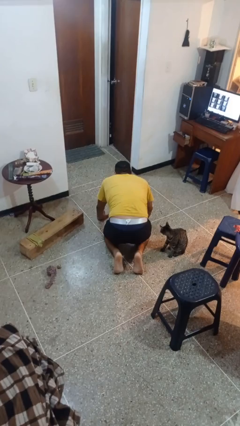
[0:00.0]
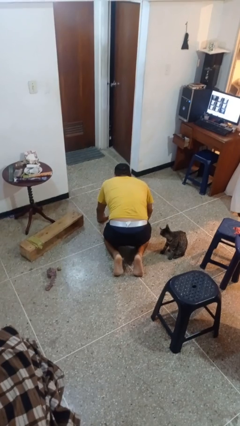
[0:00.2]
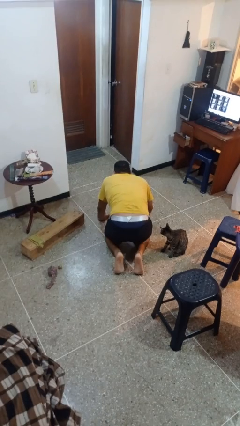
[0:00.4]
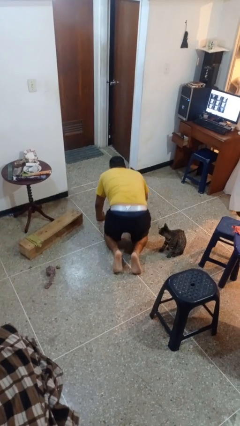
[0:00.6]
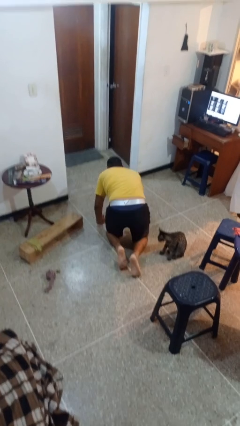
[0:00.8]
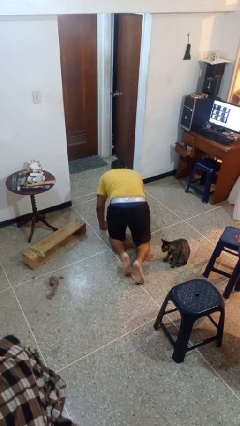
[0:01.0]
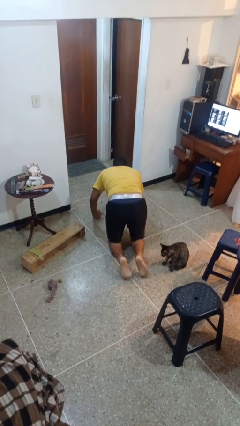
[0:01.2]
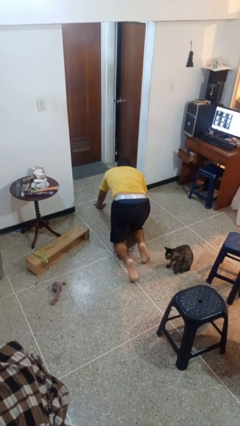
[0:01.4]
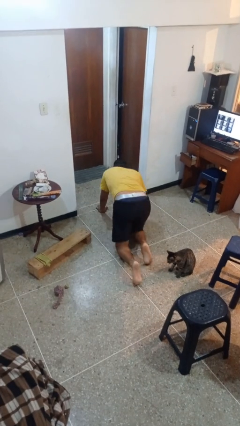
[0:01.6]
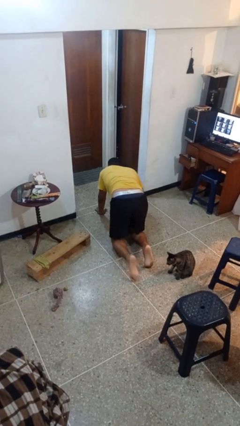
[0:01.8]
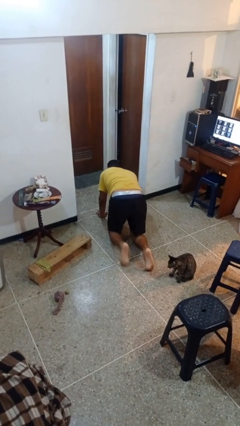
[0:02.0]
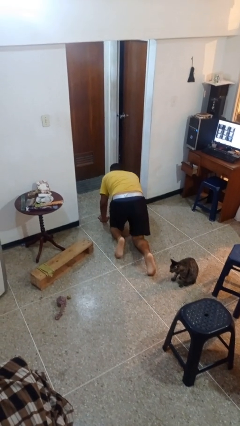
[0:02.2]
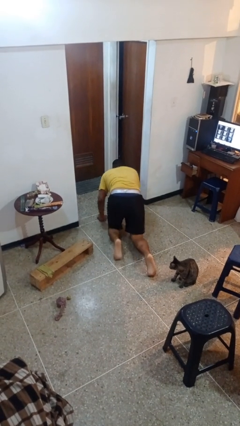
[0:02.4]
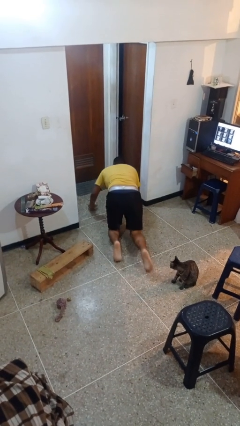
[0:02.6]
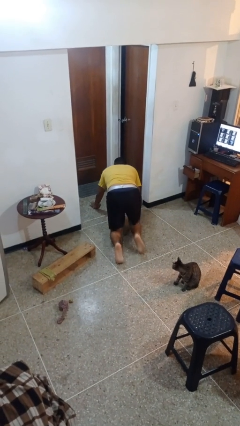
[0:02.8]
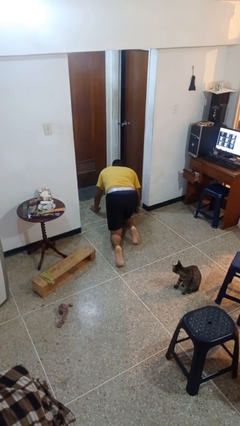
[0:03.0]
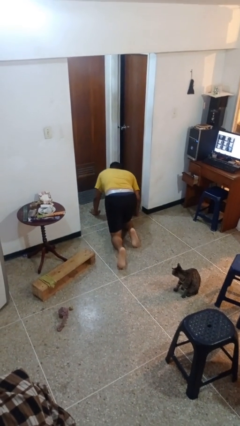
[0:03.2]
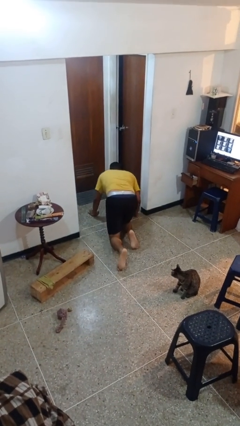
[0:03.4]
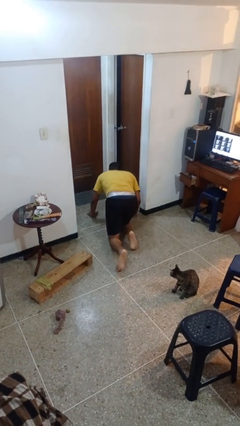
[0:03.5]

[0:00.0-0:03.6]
person crawls

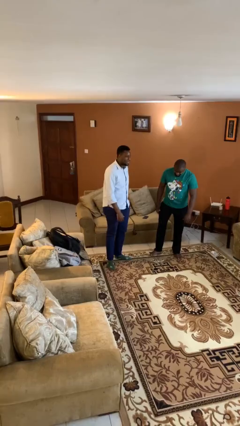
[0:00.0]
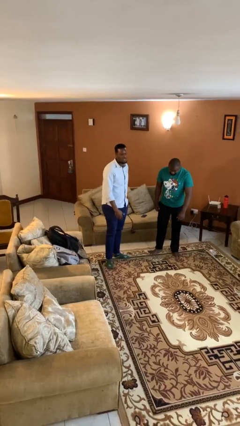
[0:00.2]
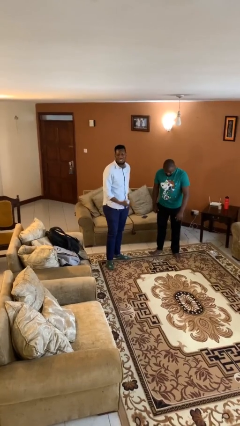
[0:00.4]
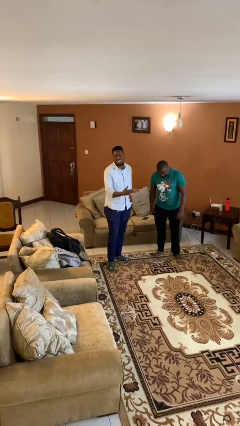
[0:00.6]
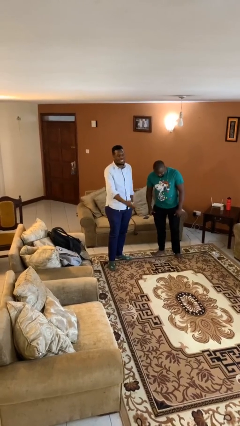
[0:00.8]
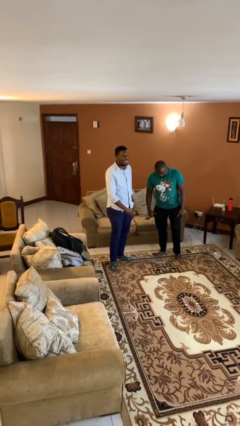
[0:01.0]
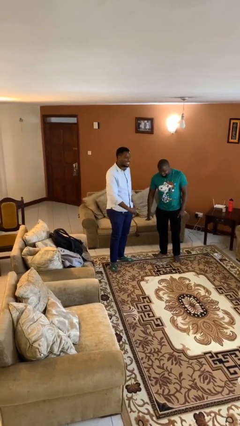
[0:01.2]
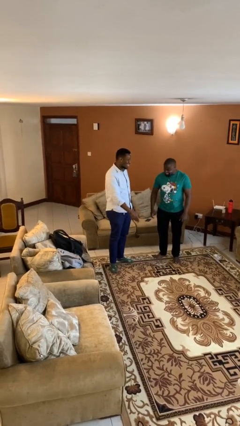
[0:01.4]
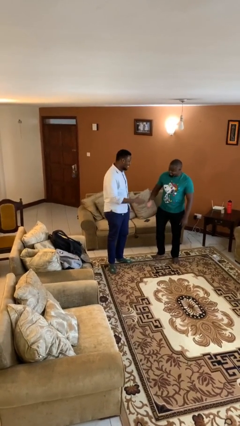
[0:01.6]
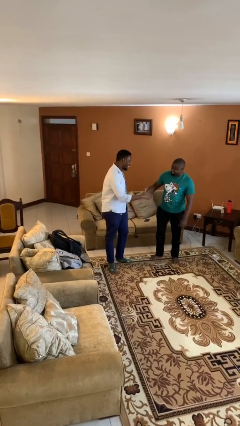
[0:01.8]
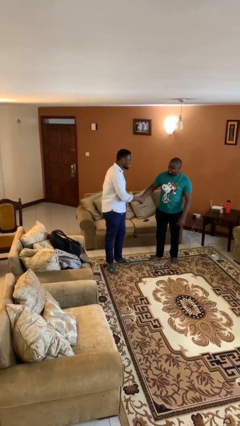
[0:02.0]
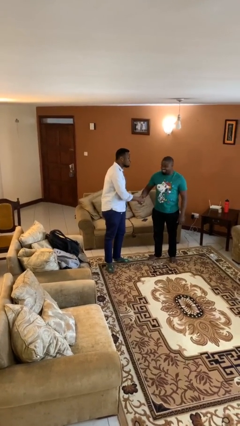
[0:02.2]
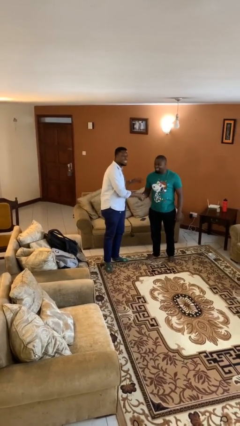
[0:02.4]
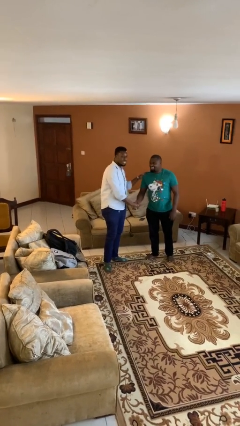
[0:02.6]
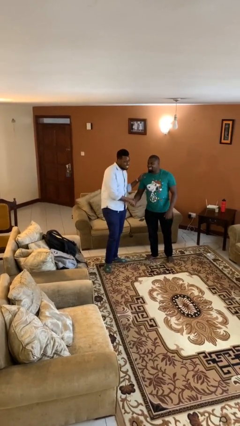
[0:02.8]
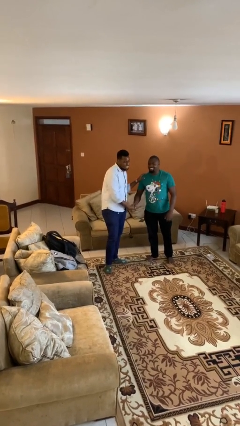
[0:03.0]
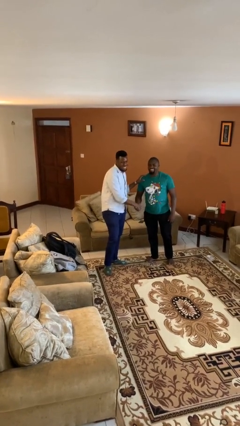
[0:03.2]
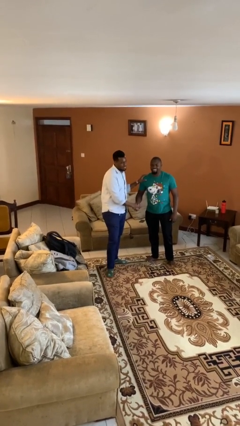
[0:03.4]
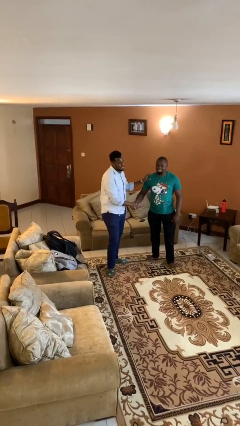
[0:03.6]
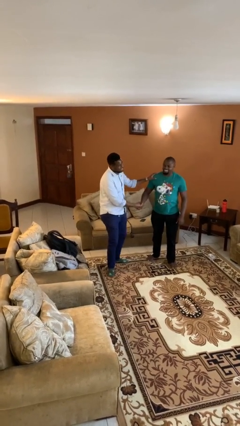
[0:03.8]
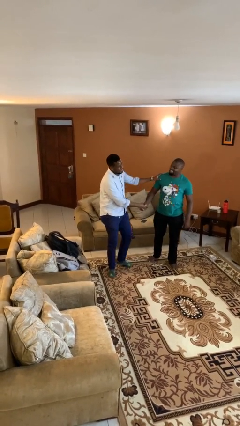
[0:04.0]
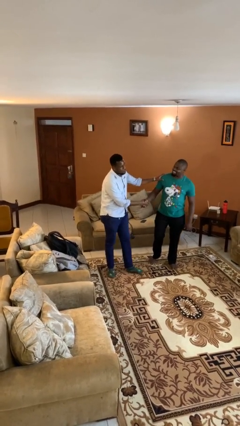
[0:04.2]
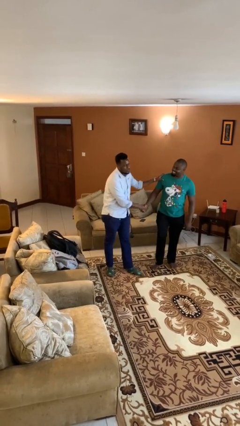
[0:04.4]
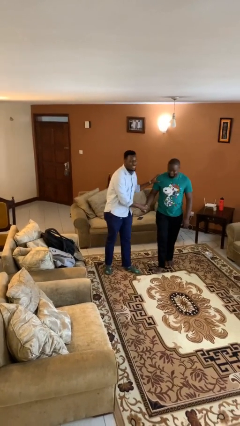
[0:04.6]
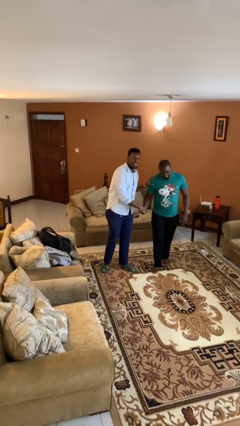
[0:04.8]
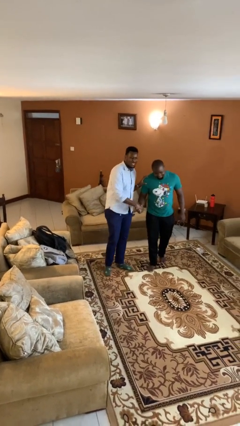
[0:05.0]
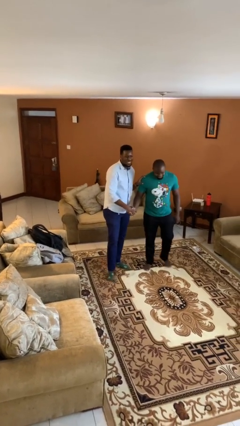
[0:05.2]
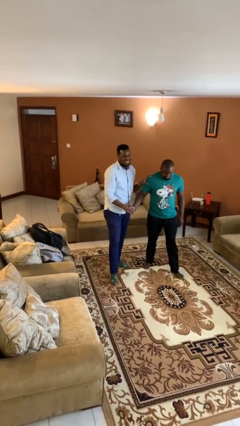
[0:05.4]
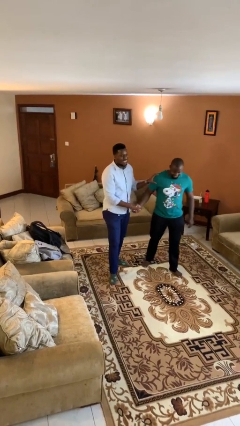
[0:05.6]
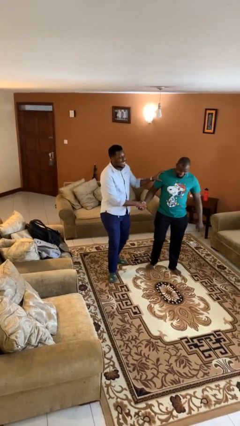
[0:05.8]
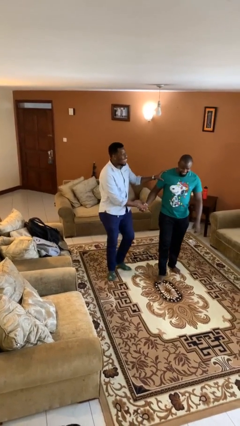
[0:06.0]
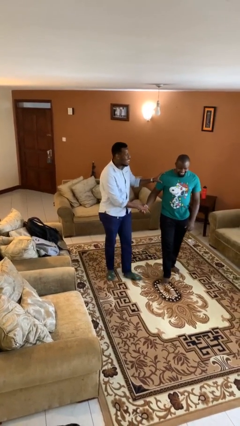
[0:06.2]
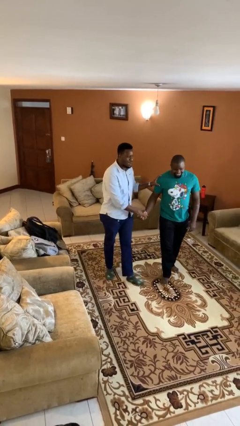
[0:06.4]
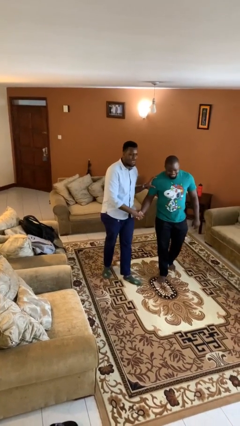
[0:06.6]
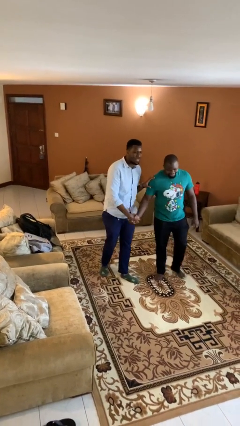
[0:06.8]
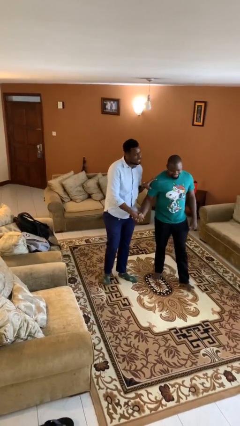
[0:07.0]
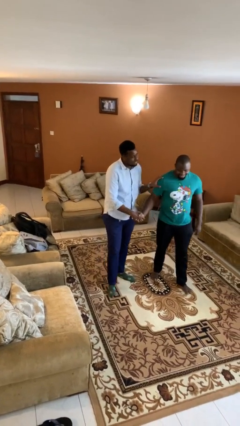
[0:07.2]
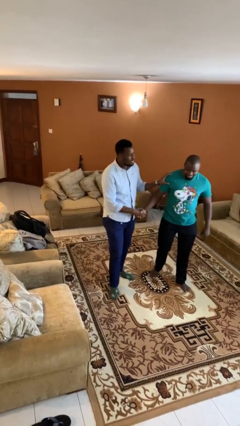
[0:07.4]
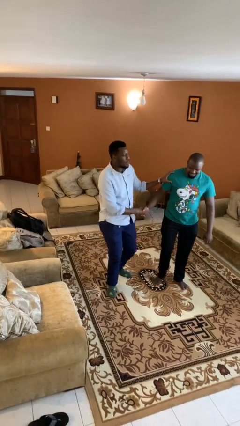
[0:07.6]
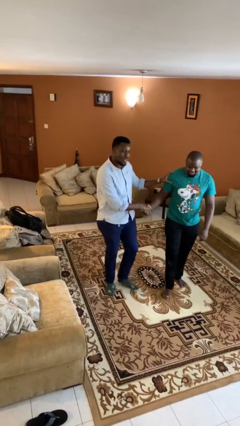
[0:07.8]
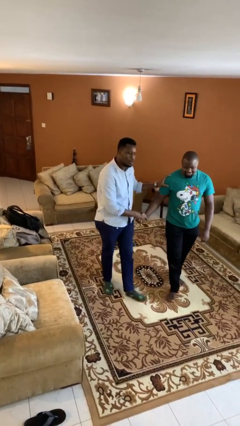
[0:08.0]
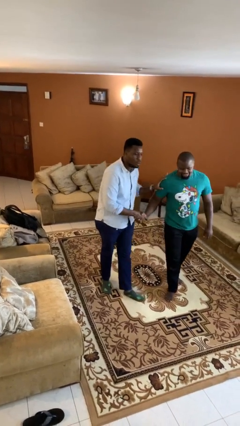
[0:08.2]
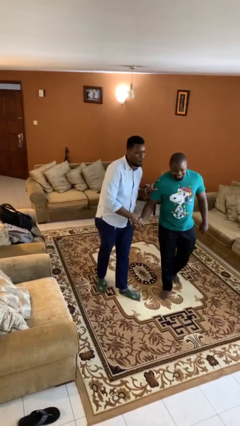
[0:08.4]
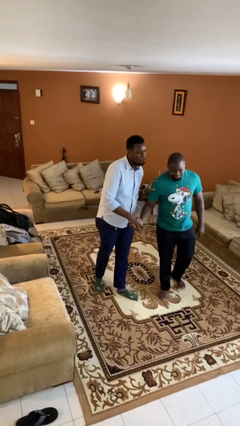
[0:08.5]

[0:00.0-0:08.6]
person holds hand

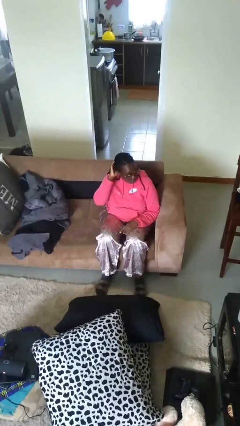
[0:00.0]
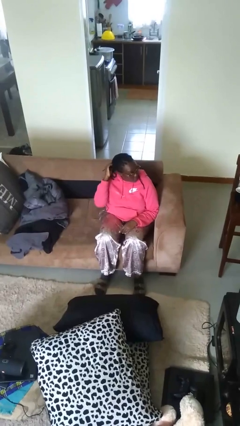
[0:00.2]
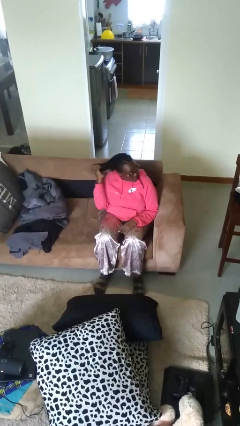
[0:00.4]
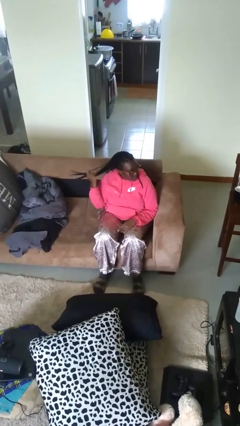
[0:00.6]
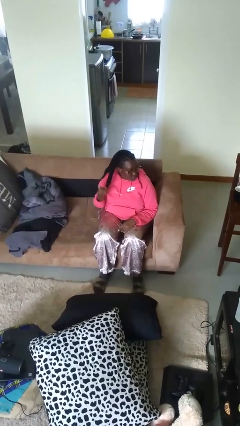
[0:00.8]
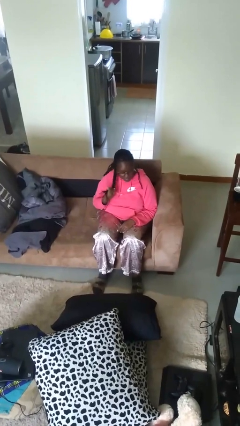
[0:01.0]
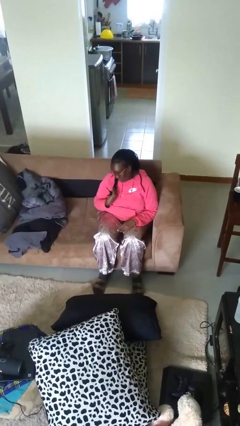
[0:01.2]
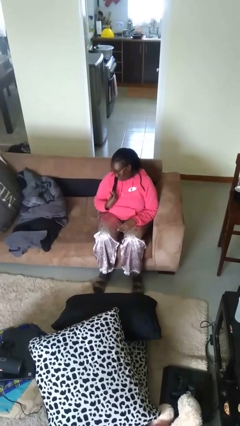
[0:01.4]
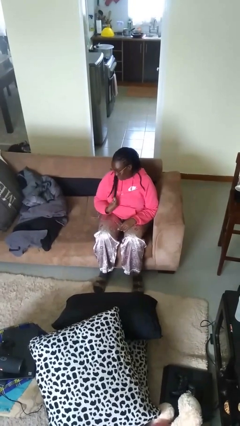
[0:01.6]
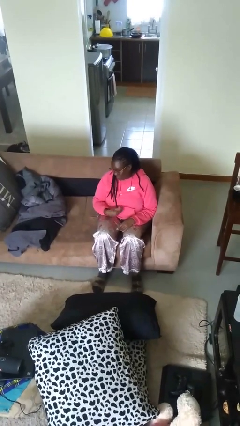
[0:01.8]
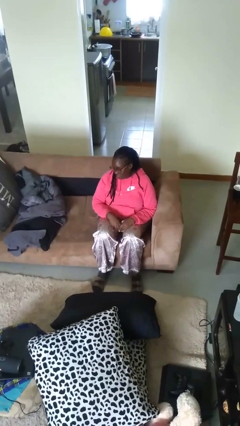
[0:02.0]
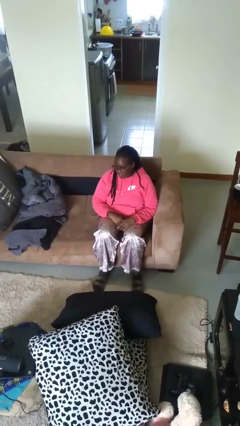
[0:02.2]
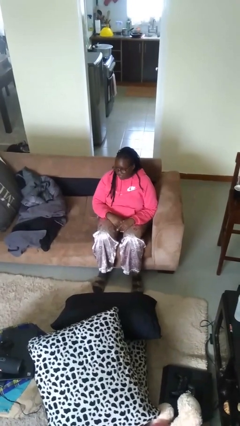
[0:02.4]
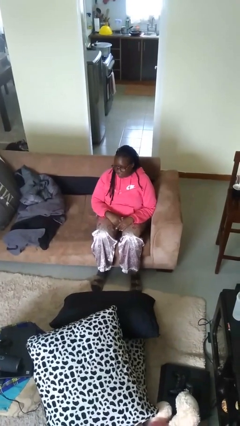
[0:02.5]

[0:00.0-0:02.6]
person strokes hair

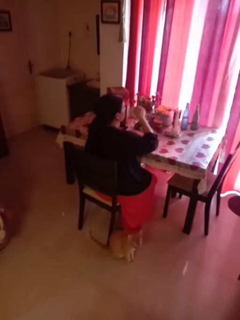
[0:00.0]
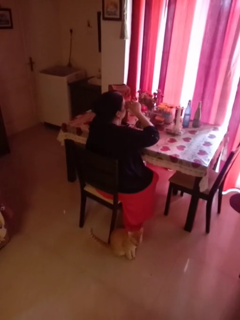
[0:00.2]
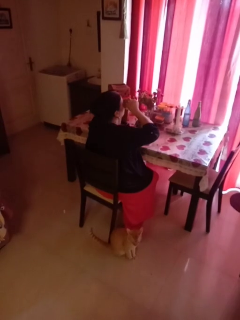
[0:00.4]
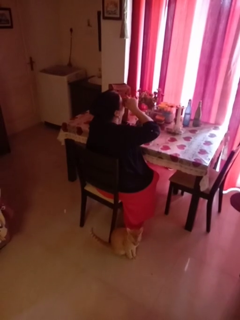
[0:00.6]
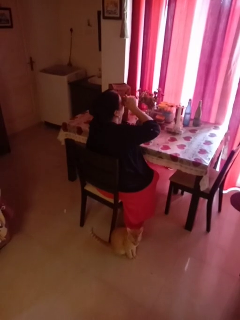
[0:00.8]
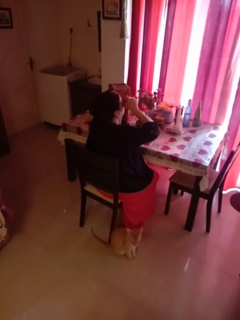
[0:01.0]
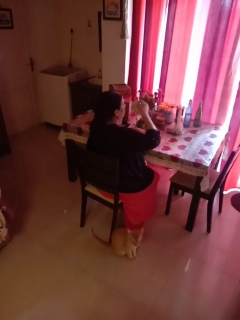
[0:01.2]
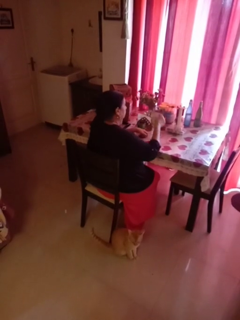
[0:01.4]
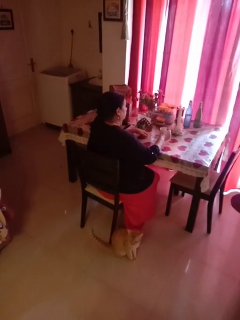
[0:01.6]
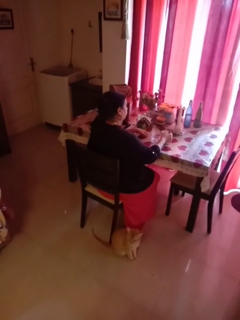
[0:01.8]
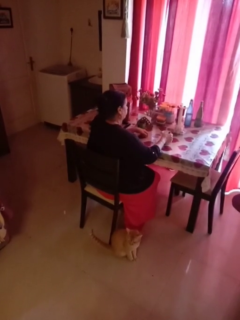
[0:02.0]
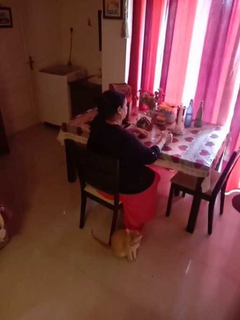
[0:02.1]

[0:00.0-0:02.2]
person drinks from mug

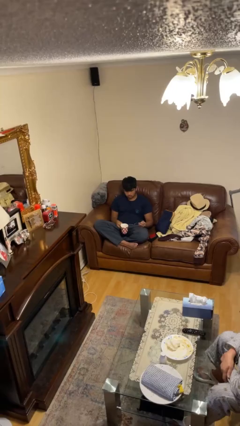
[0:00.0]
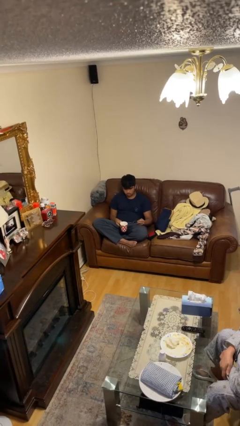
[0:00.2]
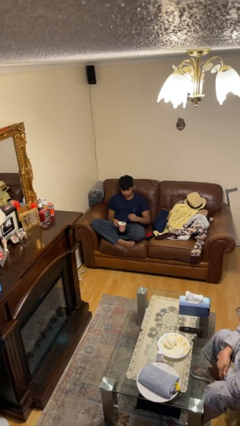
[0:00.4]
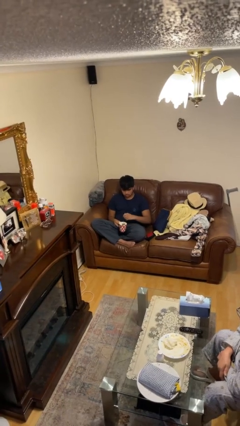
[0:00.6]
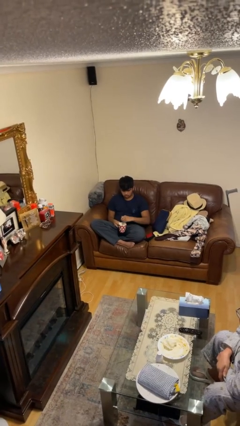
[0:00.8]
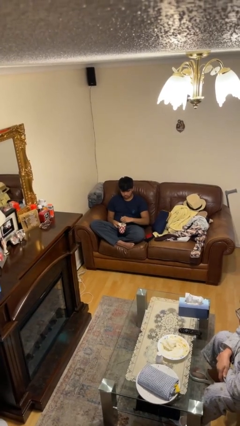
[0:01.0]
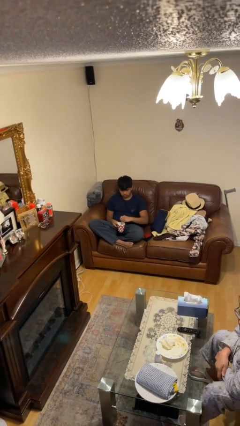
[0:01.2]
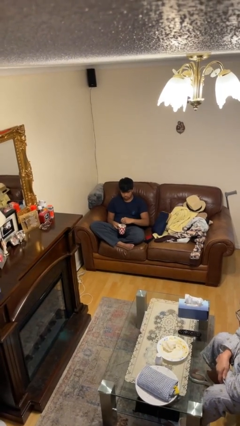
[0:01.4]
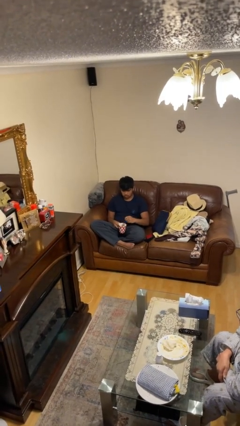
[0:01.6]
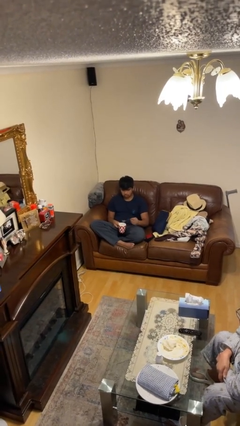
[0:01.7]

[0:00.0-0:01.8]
person stirs mug
